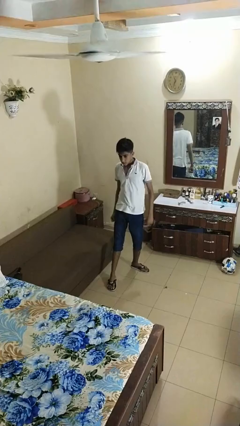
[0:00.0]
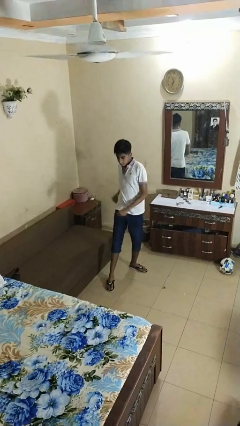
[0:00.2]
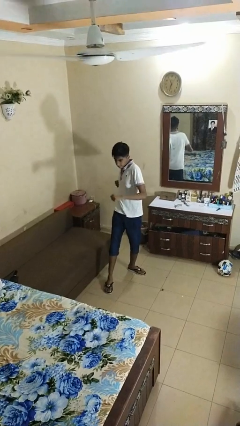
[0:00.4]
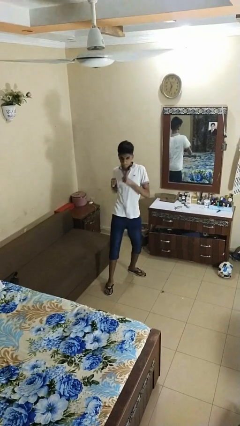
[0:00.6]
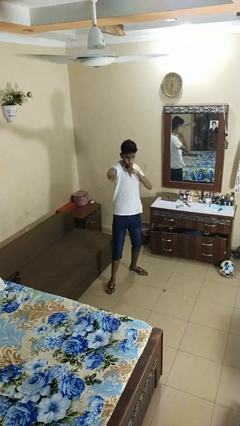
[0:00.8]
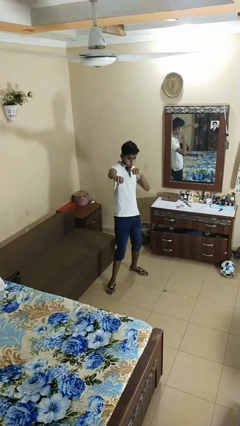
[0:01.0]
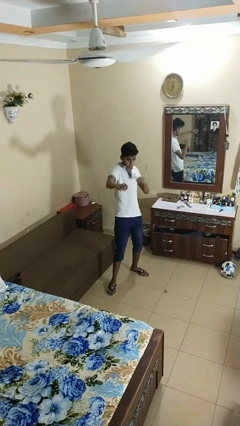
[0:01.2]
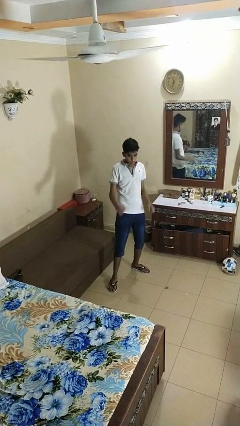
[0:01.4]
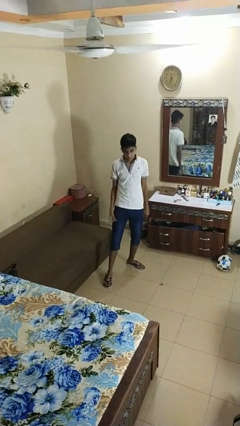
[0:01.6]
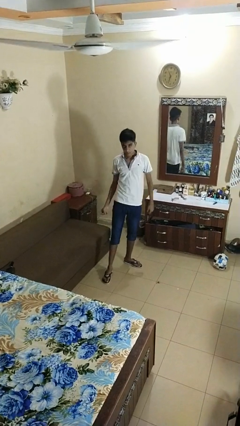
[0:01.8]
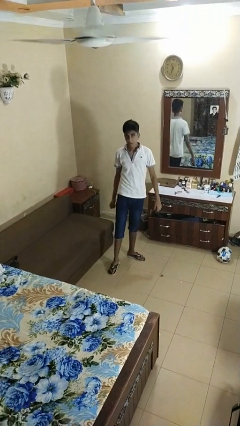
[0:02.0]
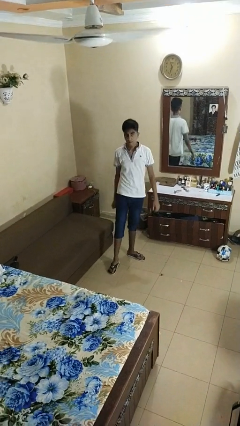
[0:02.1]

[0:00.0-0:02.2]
person karate chop

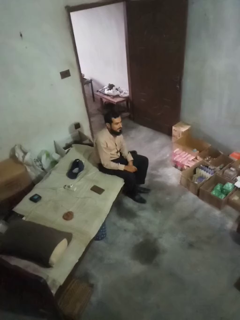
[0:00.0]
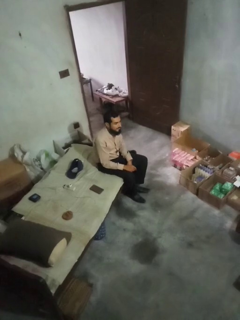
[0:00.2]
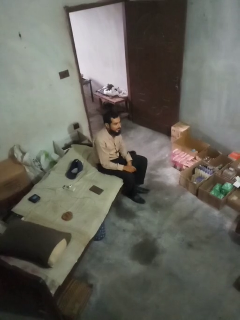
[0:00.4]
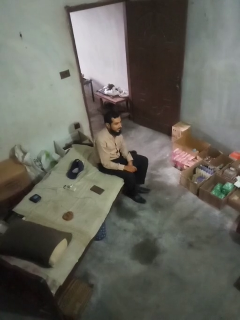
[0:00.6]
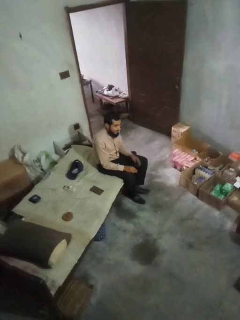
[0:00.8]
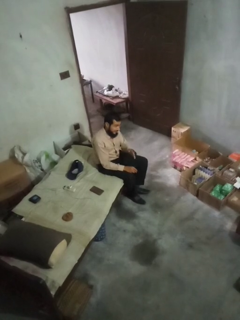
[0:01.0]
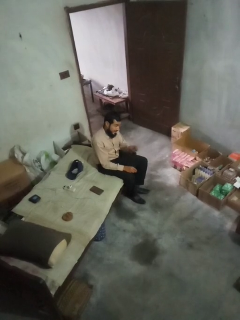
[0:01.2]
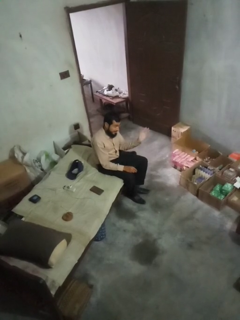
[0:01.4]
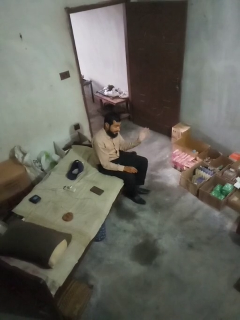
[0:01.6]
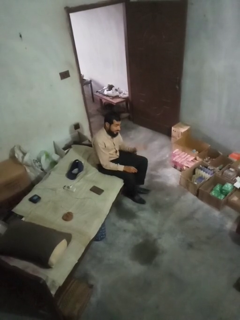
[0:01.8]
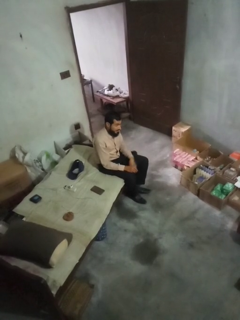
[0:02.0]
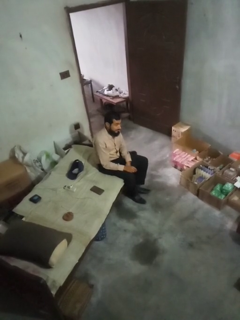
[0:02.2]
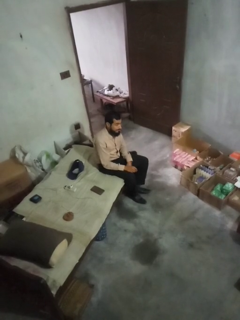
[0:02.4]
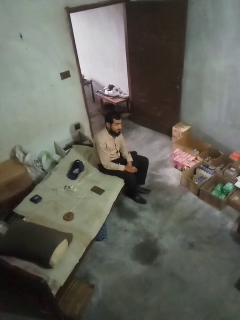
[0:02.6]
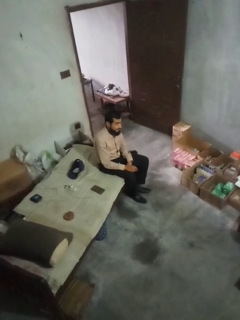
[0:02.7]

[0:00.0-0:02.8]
person gestures swipe left

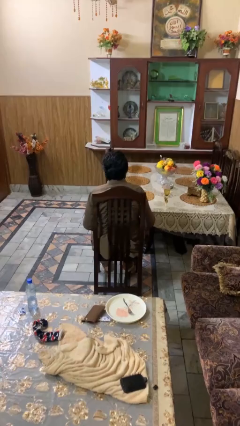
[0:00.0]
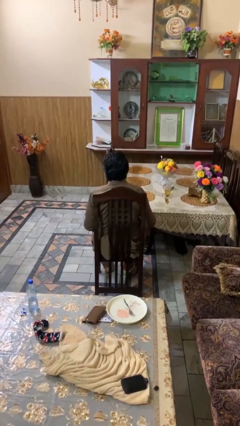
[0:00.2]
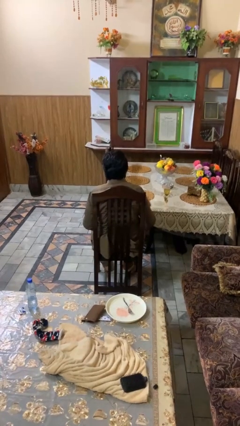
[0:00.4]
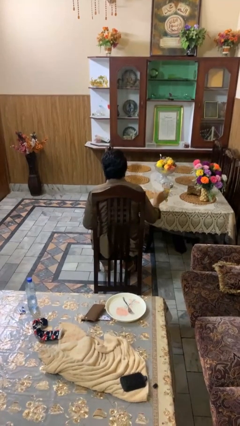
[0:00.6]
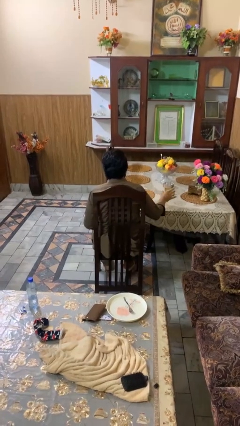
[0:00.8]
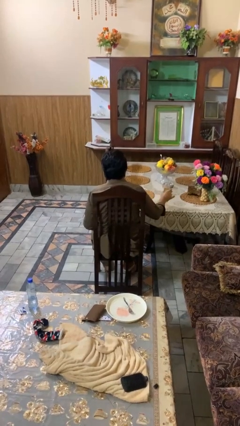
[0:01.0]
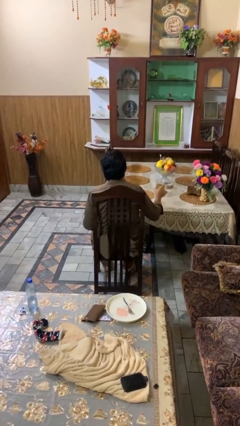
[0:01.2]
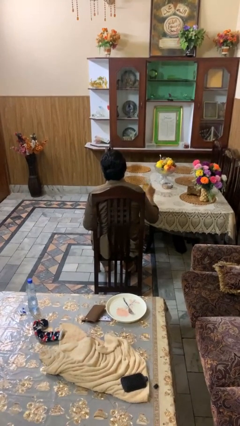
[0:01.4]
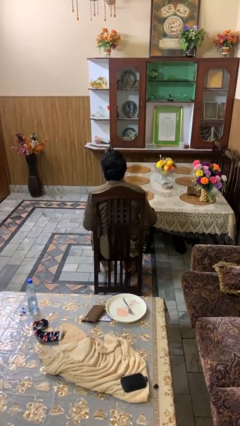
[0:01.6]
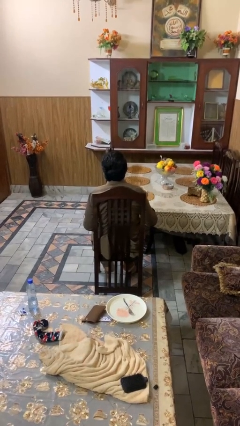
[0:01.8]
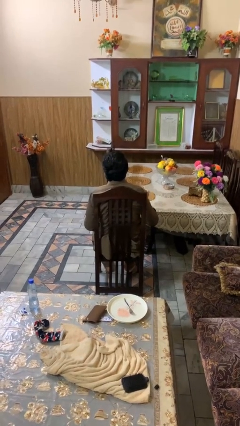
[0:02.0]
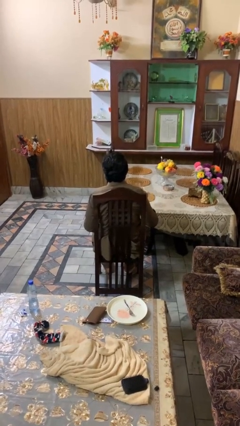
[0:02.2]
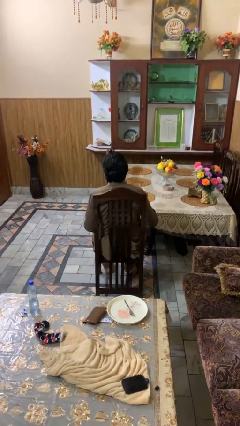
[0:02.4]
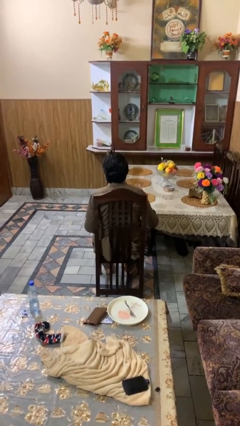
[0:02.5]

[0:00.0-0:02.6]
person picks up object from table

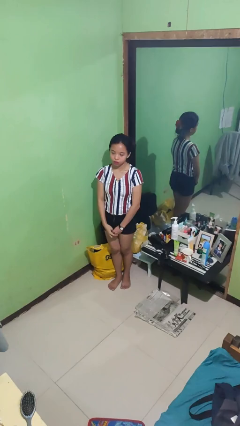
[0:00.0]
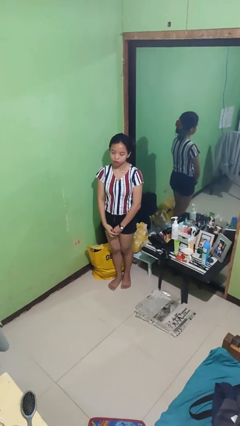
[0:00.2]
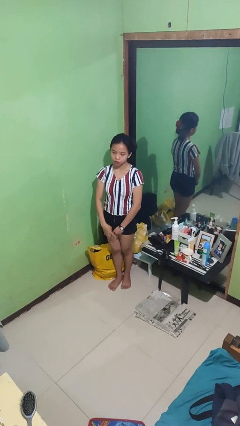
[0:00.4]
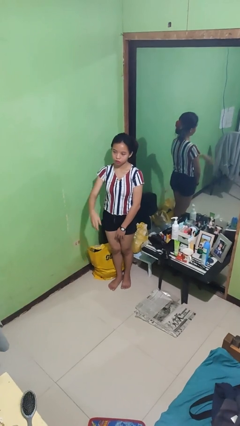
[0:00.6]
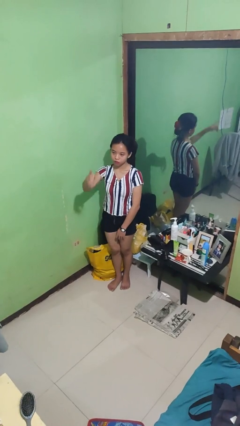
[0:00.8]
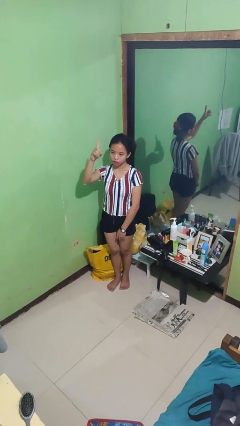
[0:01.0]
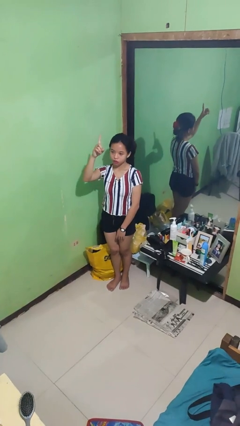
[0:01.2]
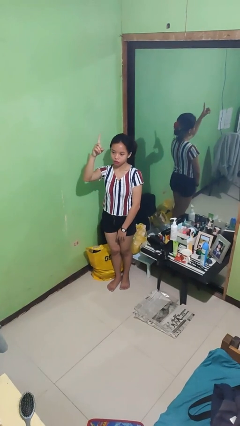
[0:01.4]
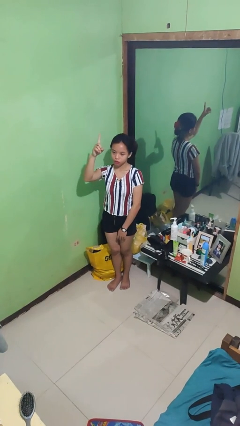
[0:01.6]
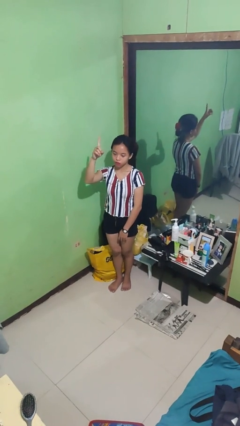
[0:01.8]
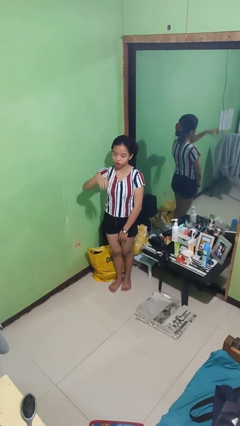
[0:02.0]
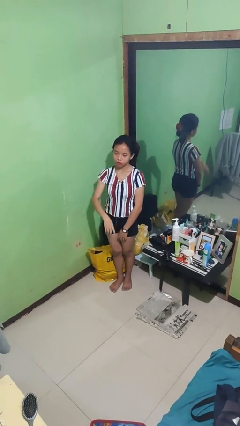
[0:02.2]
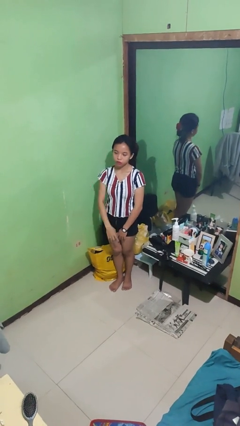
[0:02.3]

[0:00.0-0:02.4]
person gestures number one

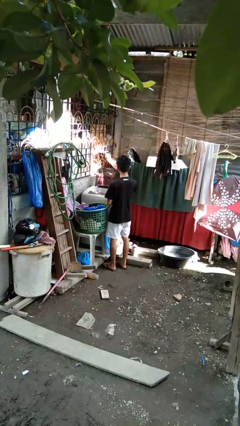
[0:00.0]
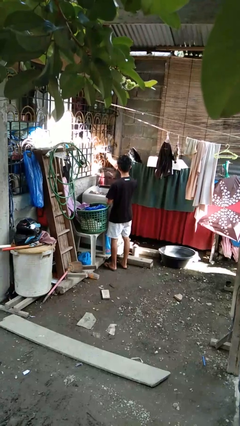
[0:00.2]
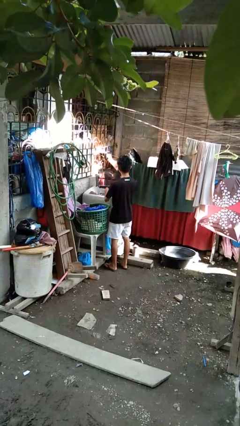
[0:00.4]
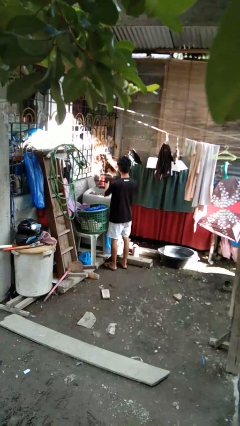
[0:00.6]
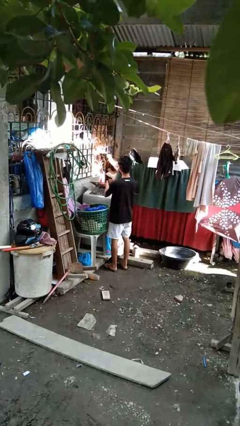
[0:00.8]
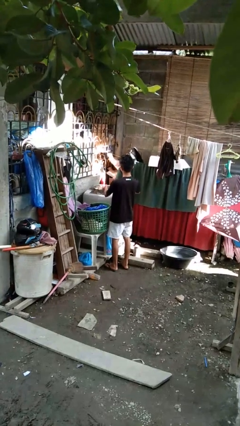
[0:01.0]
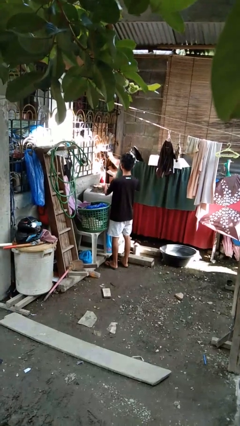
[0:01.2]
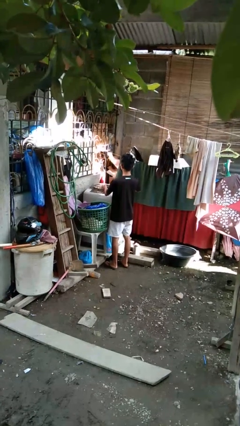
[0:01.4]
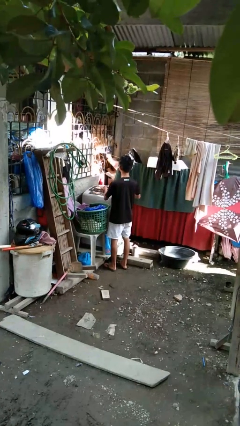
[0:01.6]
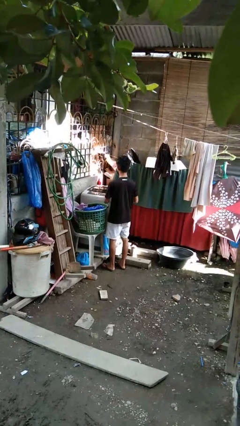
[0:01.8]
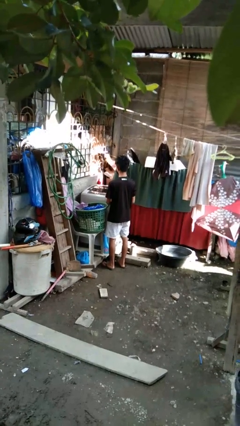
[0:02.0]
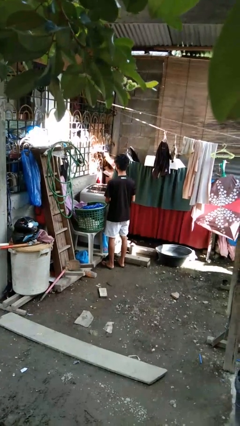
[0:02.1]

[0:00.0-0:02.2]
person closes clothes washer

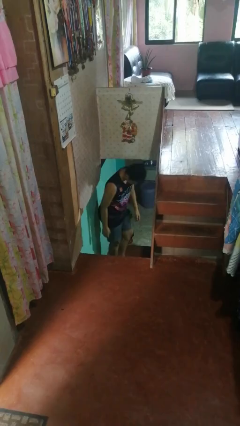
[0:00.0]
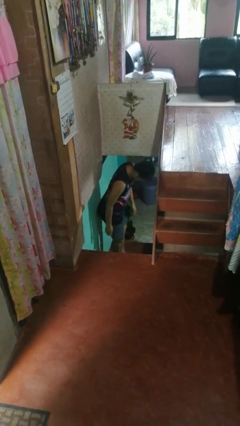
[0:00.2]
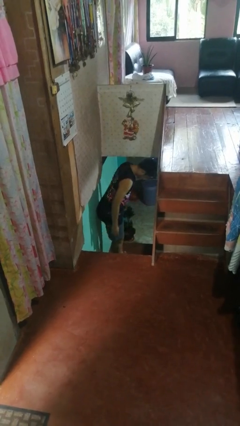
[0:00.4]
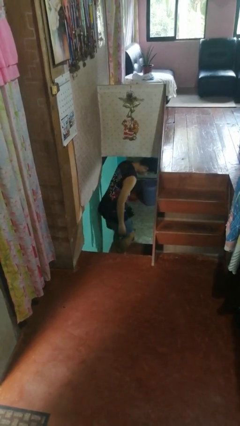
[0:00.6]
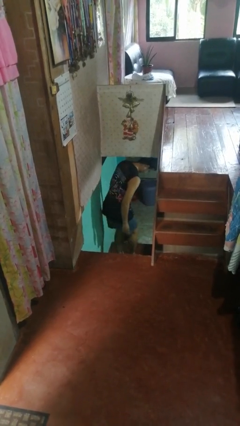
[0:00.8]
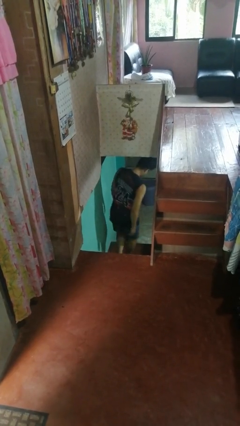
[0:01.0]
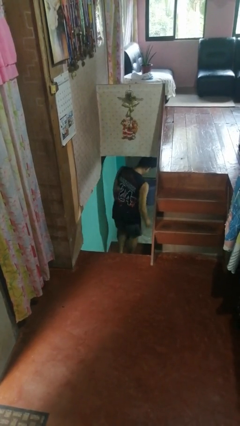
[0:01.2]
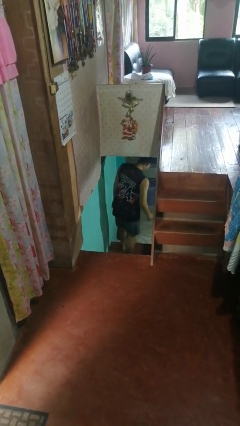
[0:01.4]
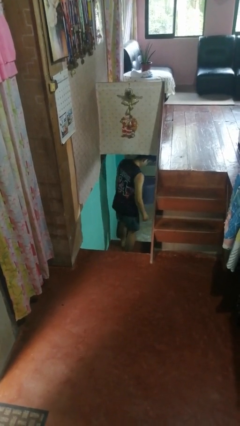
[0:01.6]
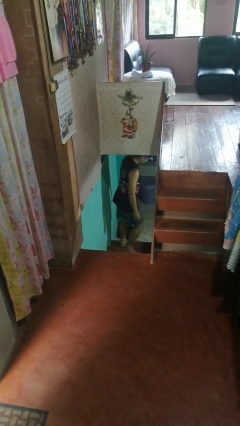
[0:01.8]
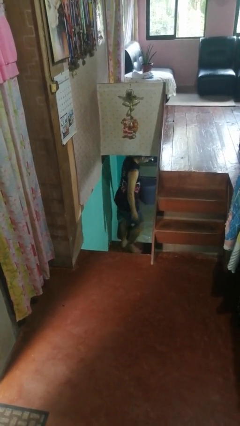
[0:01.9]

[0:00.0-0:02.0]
person climbs down stairs

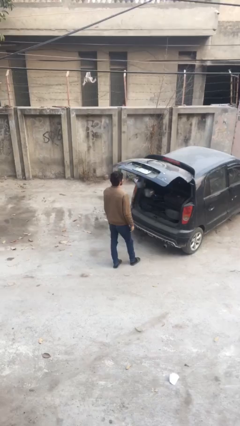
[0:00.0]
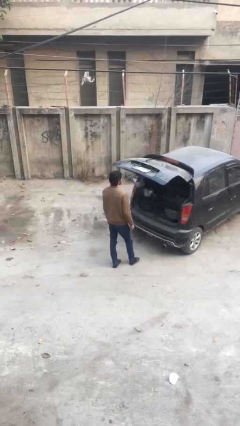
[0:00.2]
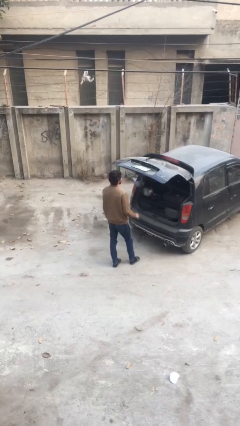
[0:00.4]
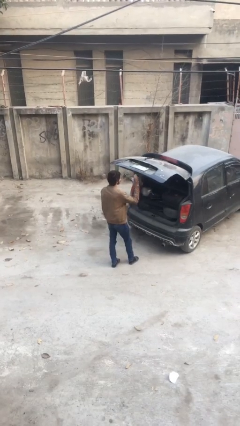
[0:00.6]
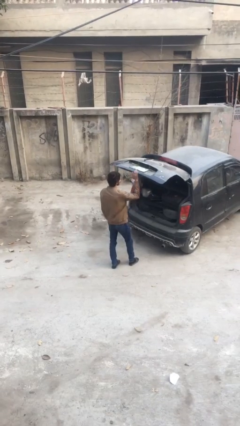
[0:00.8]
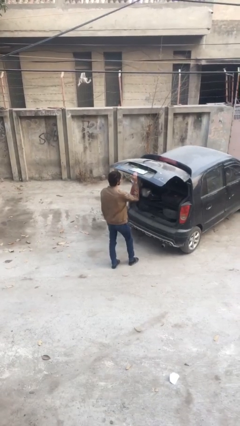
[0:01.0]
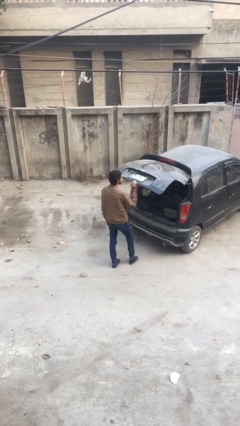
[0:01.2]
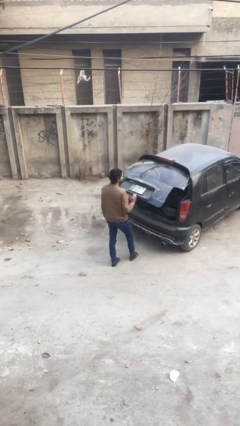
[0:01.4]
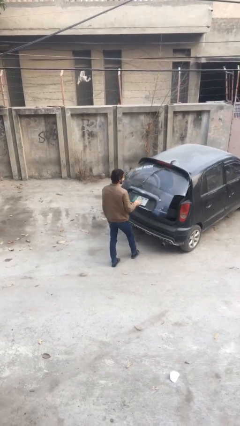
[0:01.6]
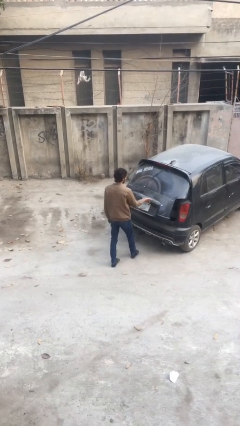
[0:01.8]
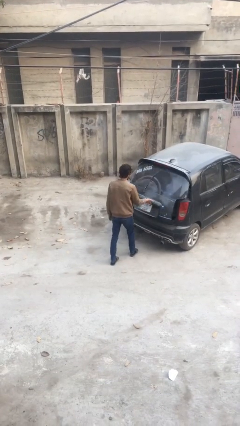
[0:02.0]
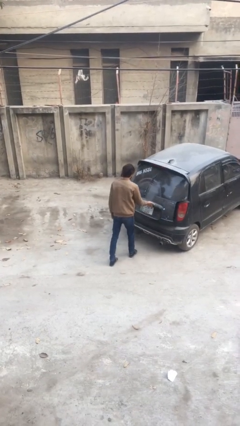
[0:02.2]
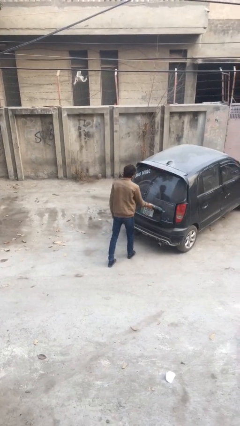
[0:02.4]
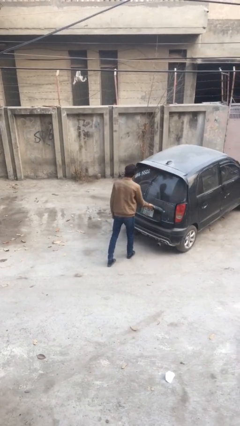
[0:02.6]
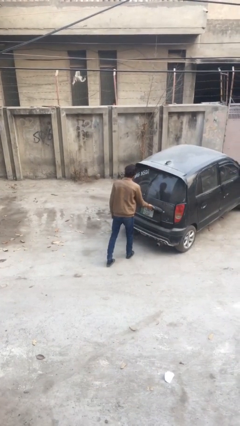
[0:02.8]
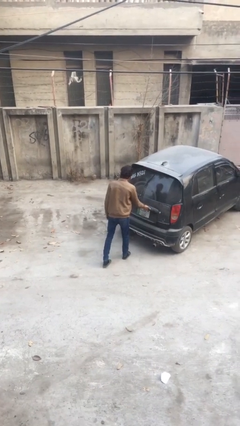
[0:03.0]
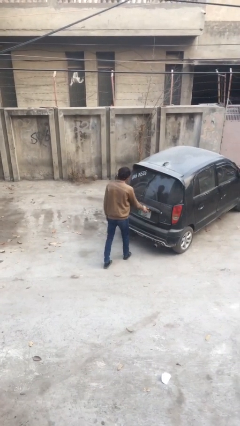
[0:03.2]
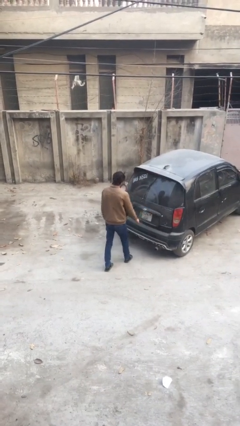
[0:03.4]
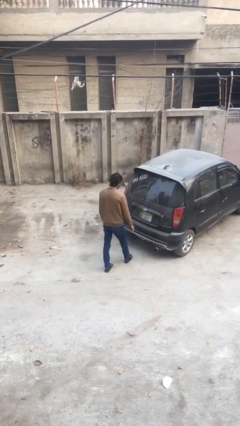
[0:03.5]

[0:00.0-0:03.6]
person closes car trunk
